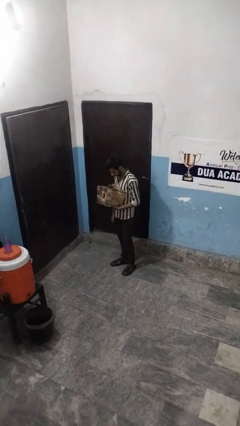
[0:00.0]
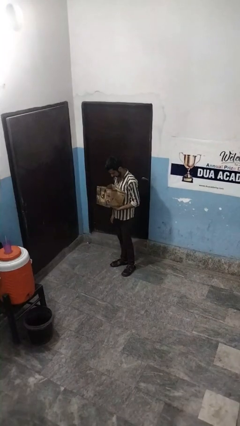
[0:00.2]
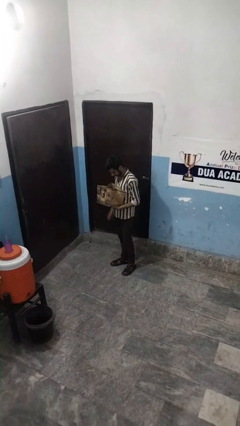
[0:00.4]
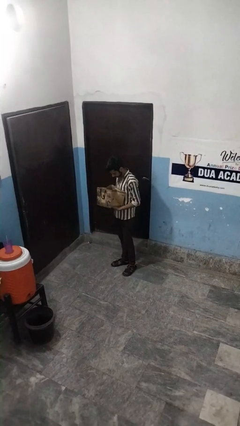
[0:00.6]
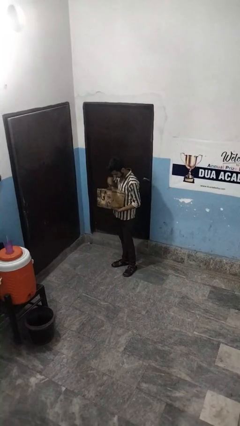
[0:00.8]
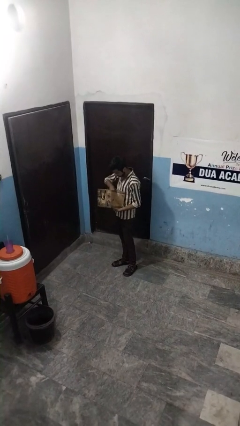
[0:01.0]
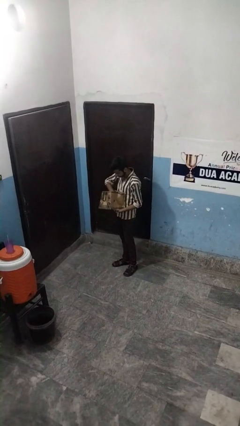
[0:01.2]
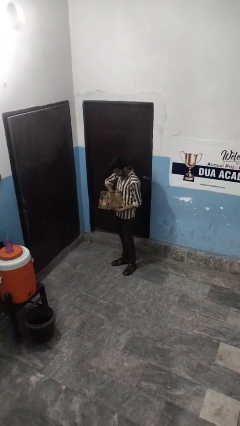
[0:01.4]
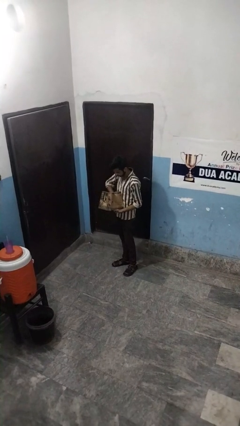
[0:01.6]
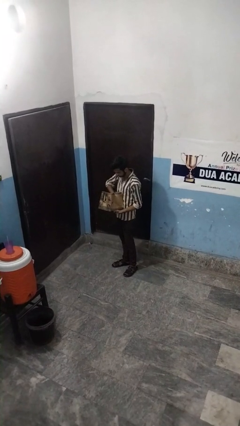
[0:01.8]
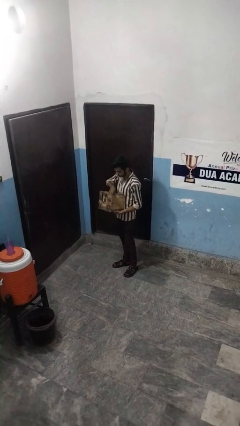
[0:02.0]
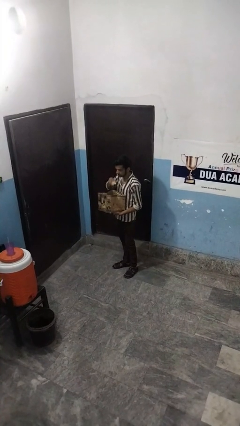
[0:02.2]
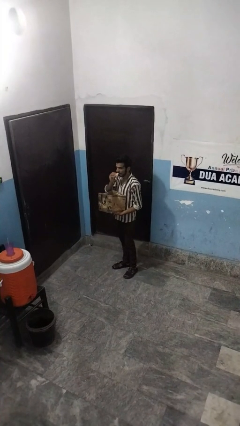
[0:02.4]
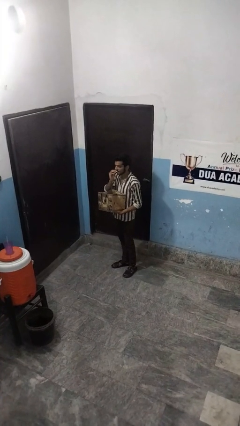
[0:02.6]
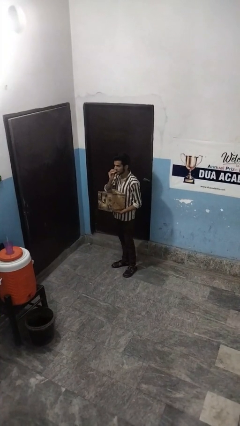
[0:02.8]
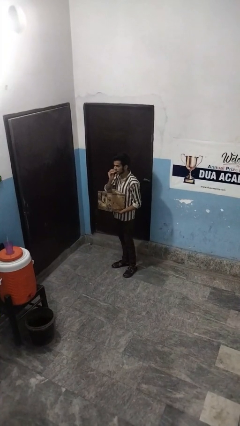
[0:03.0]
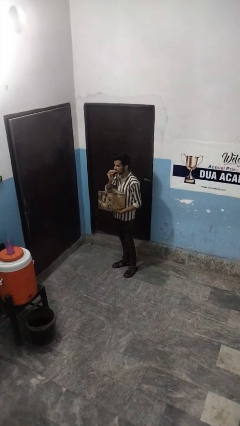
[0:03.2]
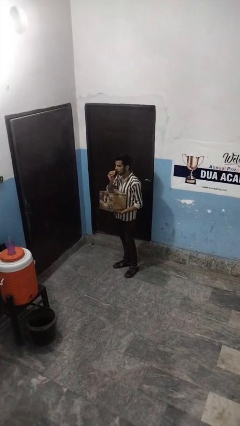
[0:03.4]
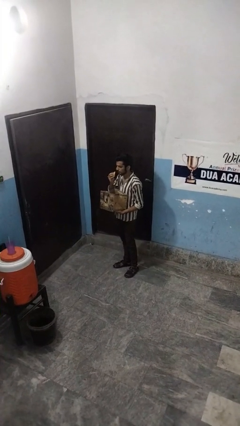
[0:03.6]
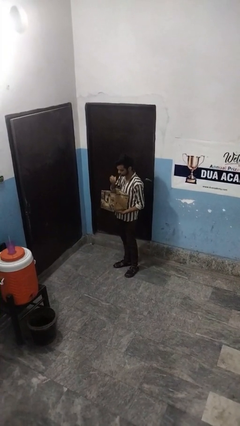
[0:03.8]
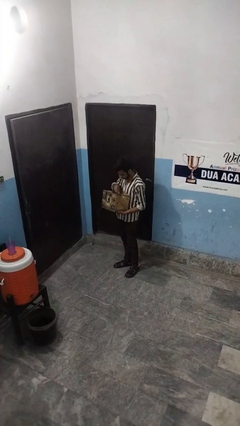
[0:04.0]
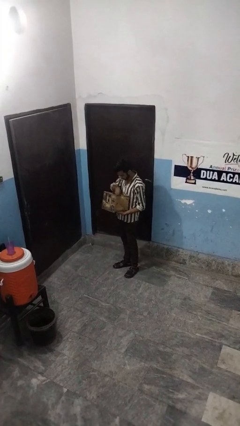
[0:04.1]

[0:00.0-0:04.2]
person eats snack from bag

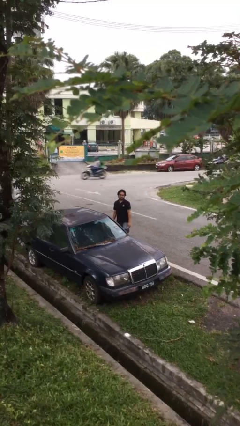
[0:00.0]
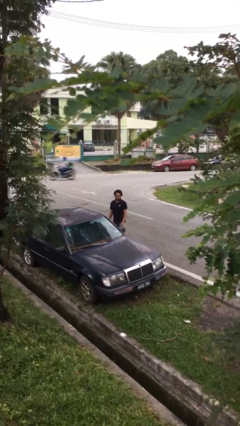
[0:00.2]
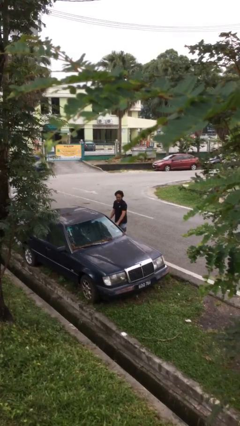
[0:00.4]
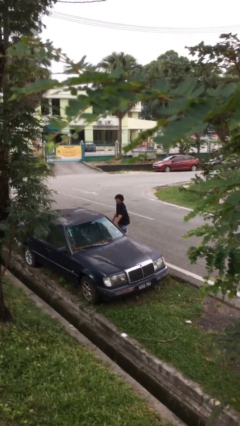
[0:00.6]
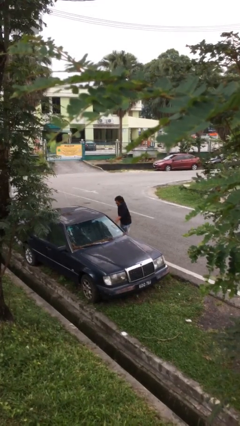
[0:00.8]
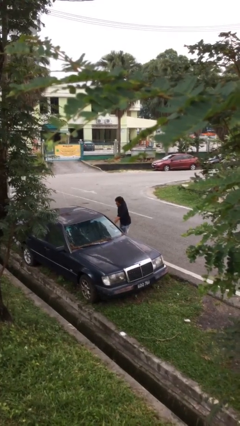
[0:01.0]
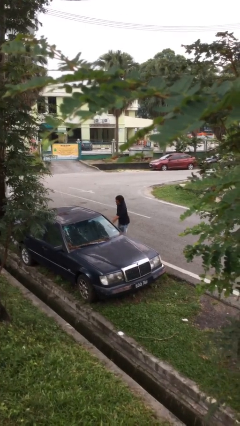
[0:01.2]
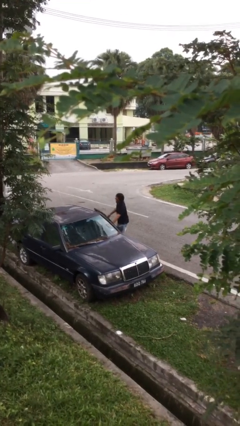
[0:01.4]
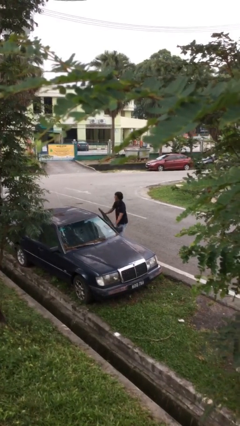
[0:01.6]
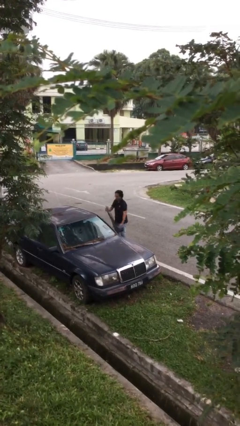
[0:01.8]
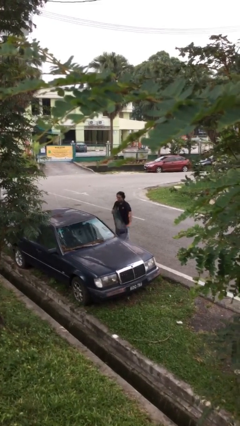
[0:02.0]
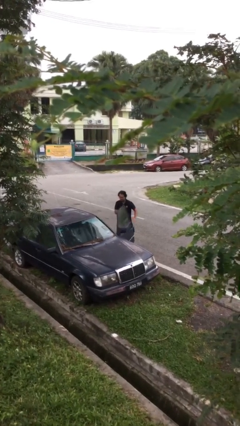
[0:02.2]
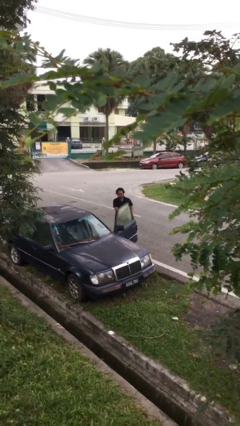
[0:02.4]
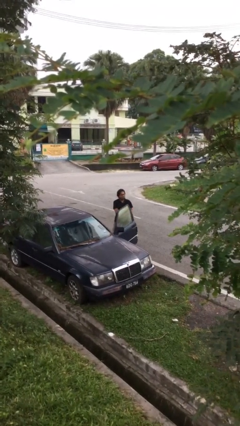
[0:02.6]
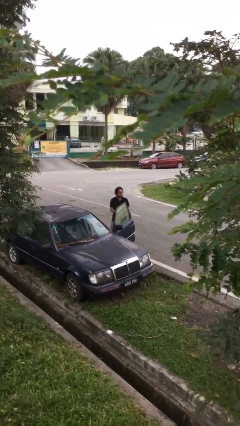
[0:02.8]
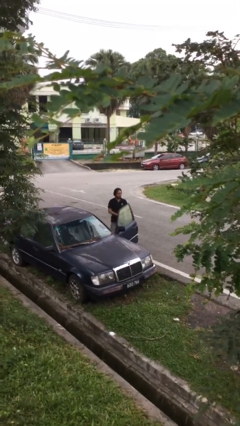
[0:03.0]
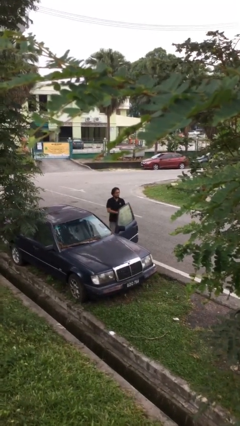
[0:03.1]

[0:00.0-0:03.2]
person opens car door

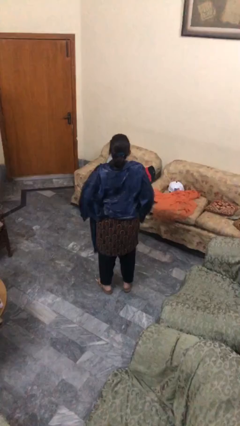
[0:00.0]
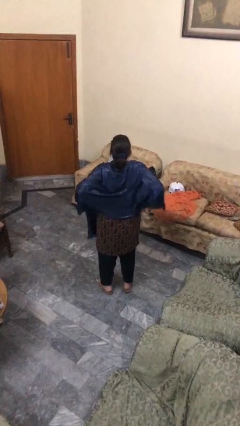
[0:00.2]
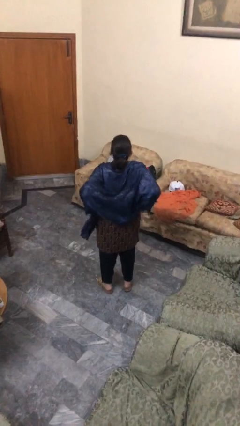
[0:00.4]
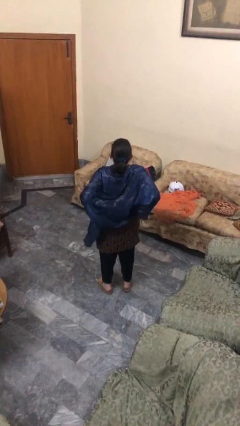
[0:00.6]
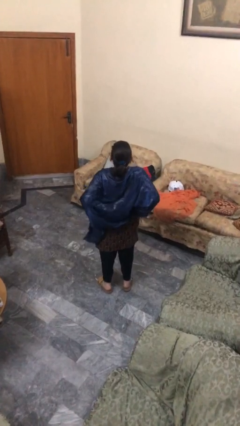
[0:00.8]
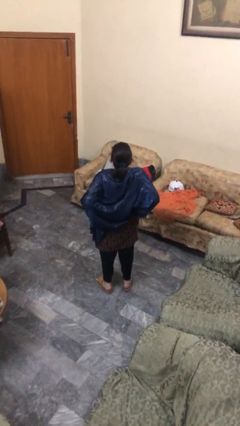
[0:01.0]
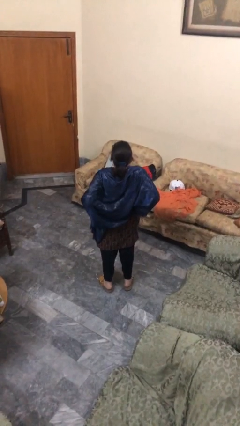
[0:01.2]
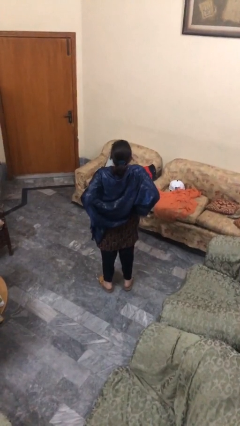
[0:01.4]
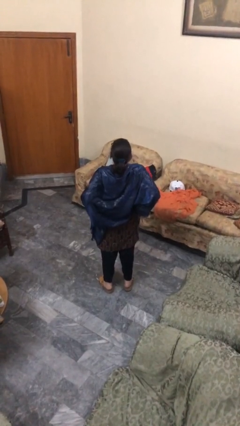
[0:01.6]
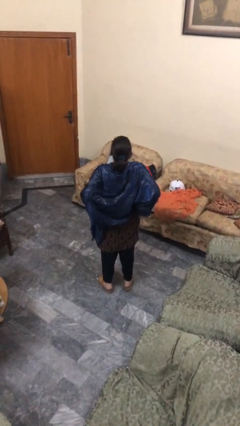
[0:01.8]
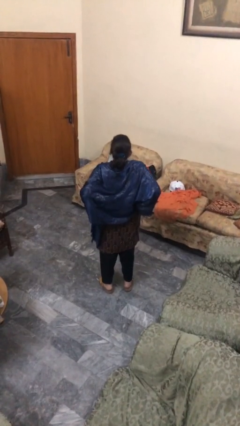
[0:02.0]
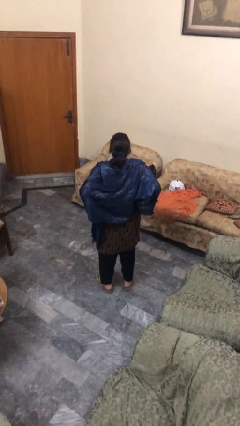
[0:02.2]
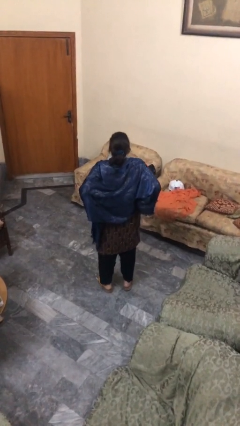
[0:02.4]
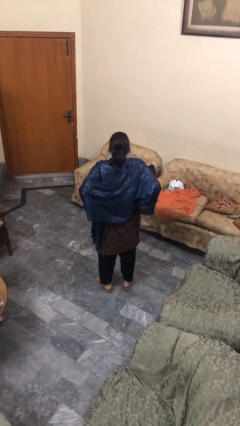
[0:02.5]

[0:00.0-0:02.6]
person stretches back

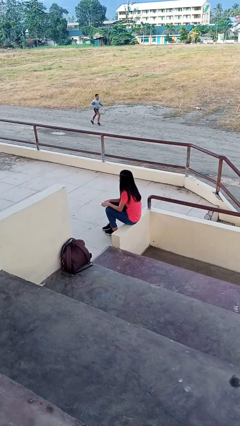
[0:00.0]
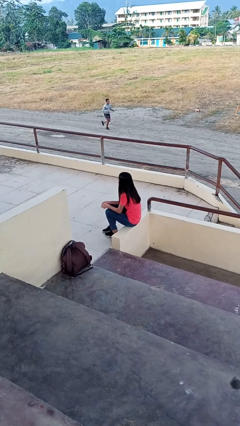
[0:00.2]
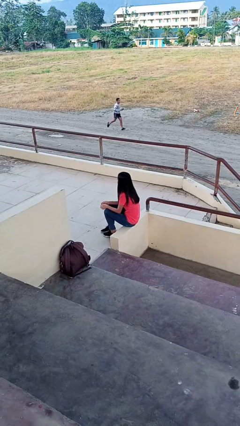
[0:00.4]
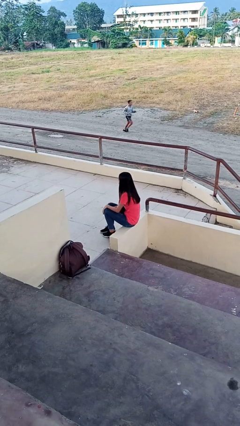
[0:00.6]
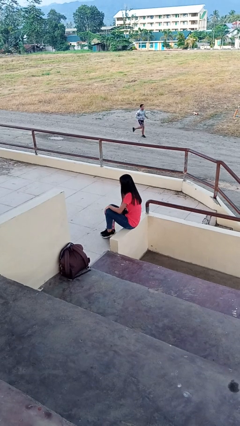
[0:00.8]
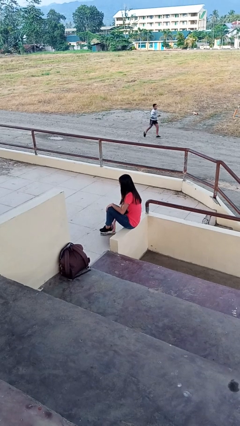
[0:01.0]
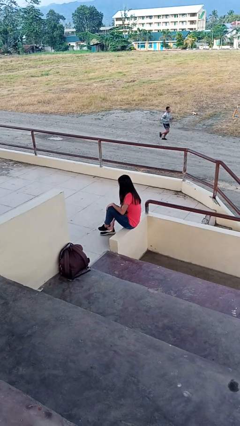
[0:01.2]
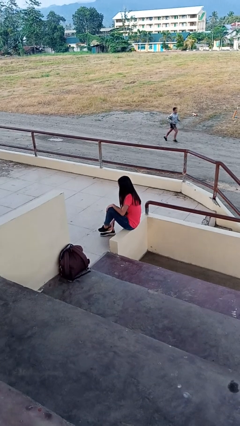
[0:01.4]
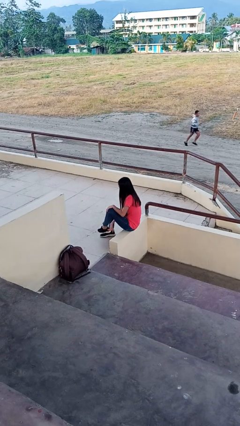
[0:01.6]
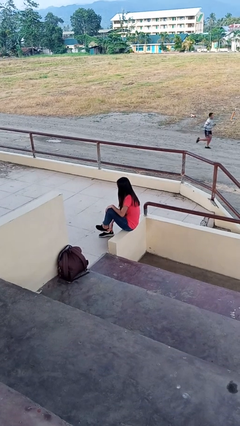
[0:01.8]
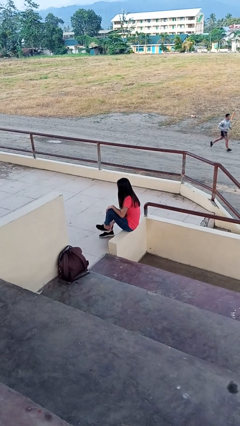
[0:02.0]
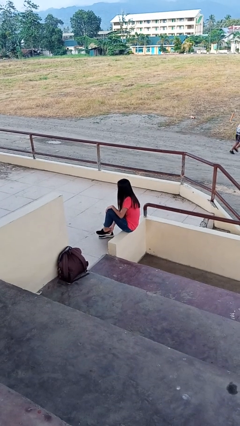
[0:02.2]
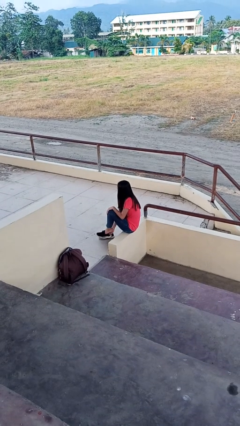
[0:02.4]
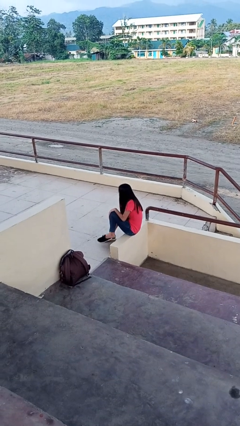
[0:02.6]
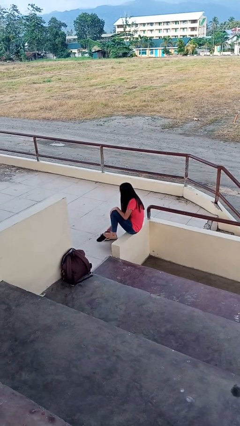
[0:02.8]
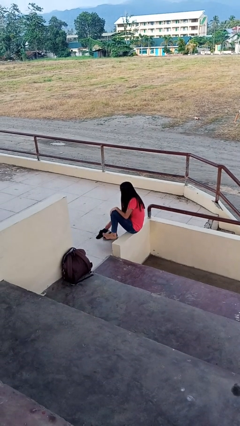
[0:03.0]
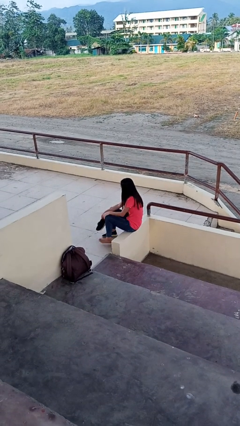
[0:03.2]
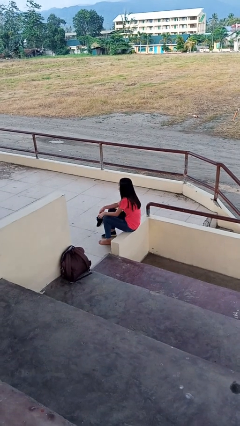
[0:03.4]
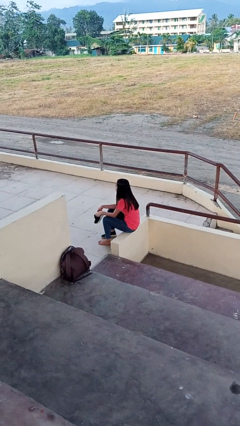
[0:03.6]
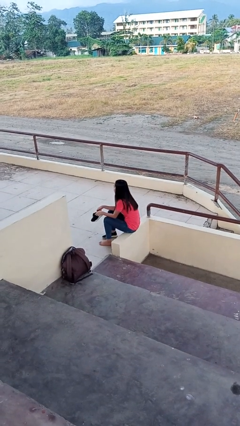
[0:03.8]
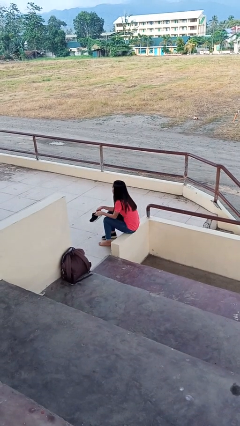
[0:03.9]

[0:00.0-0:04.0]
person takes off shoes

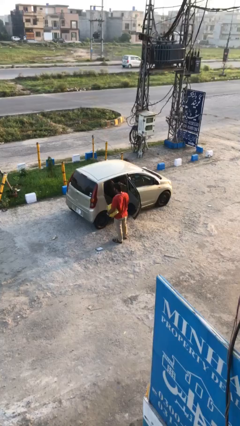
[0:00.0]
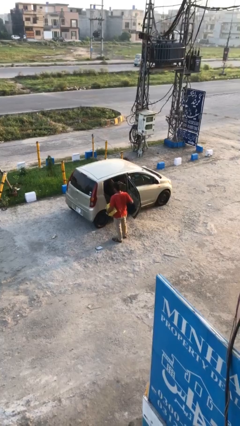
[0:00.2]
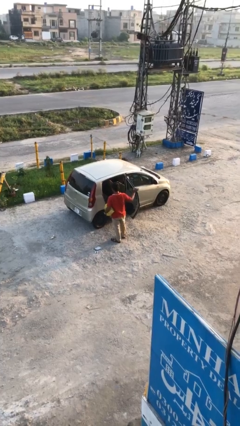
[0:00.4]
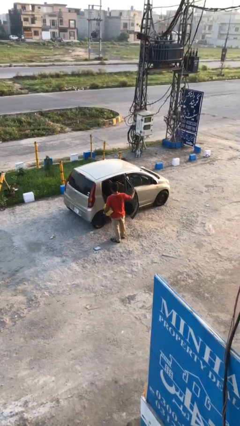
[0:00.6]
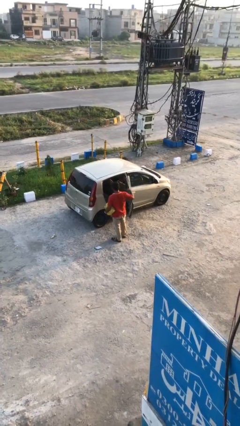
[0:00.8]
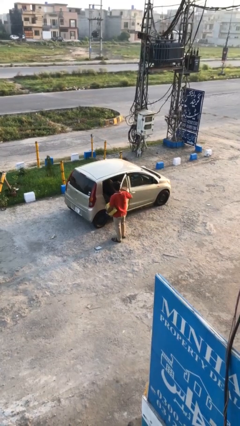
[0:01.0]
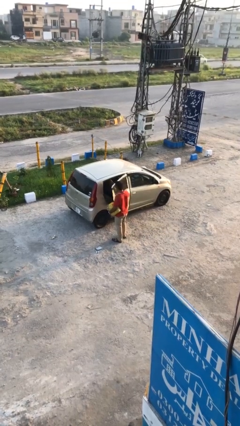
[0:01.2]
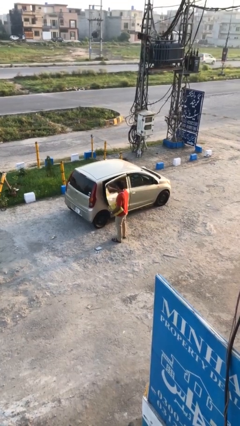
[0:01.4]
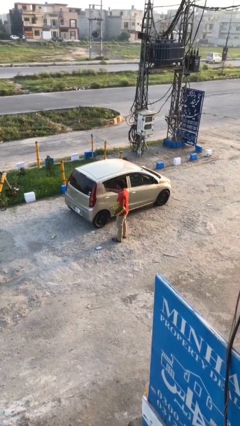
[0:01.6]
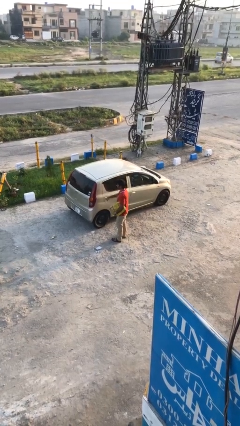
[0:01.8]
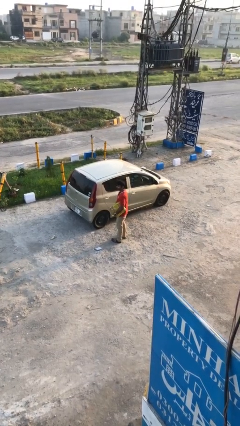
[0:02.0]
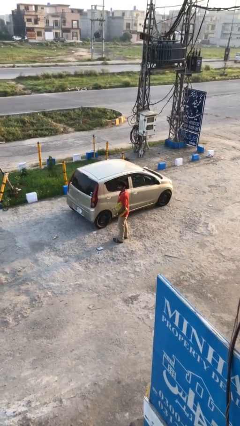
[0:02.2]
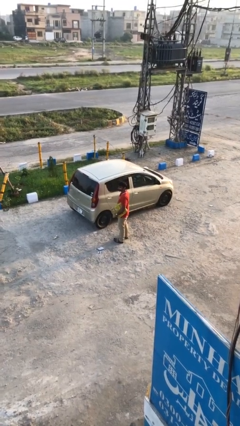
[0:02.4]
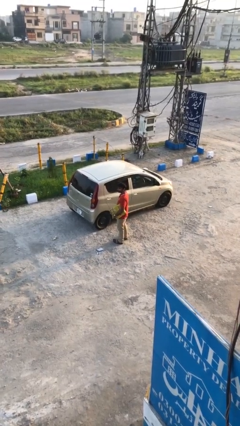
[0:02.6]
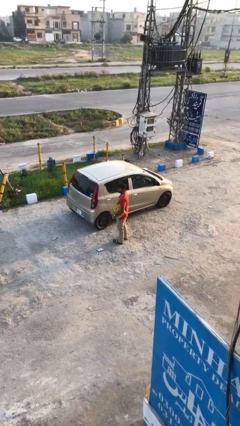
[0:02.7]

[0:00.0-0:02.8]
person closes car door

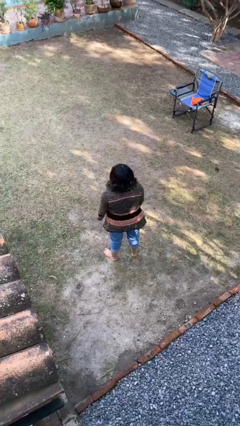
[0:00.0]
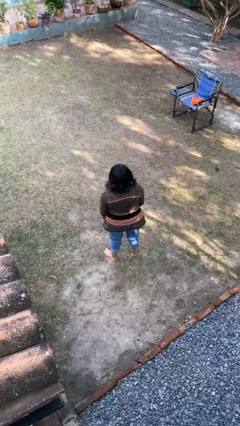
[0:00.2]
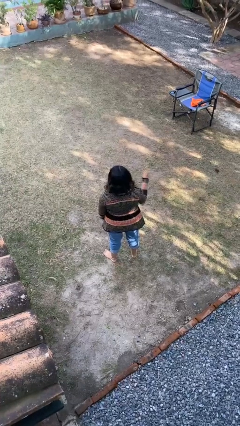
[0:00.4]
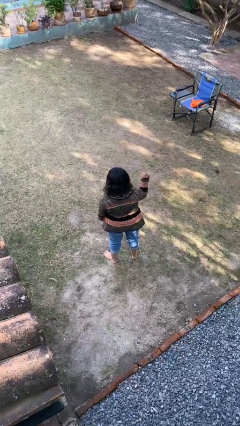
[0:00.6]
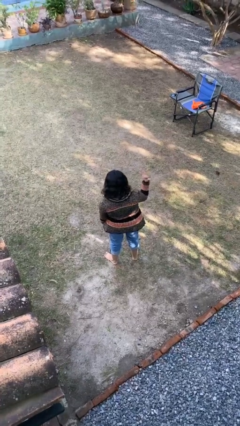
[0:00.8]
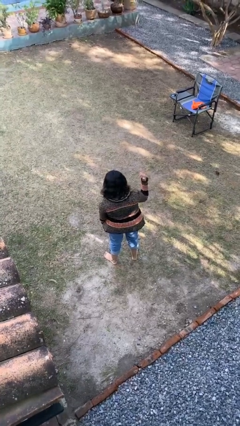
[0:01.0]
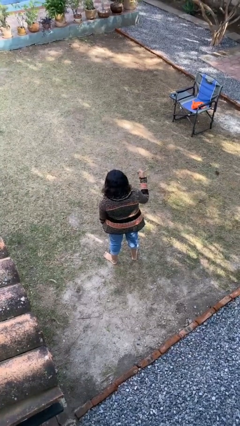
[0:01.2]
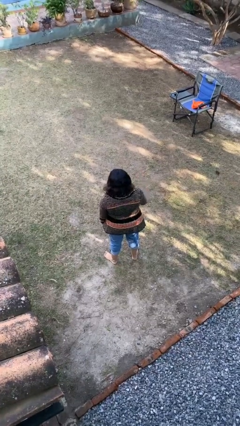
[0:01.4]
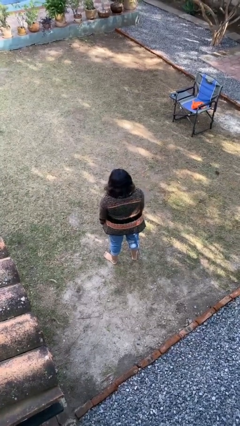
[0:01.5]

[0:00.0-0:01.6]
person gestures hang loose
